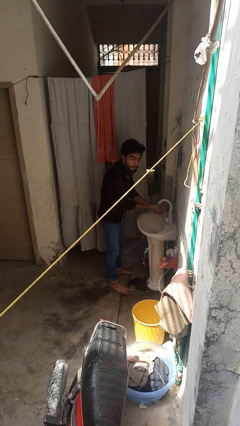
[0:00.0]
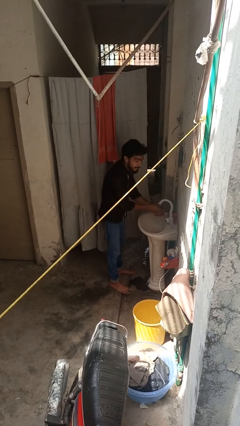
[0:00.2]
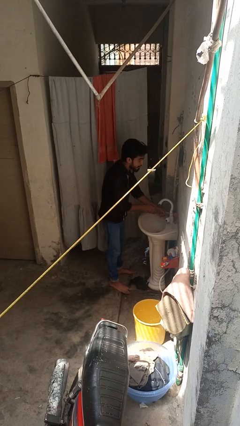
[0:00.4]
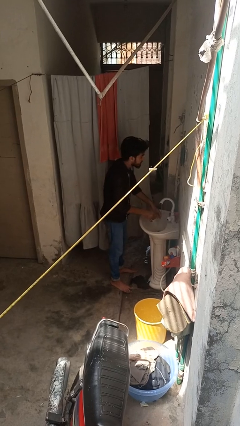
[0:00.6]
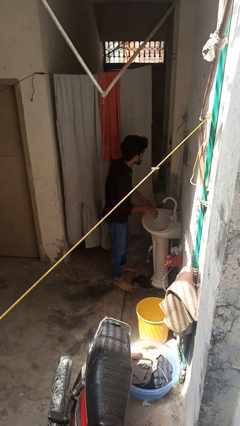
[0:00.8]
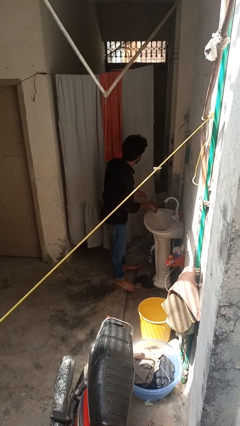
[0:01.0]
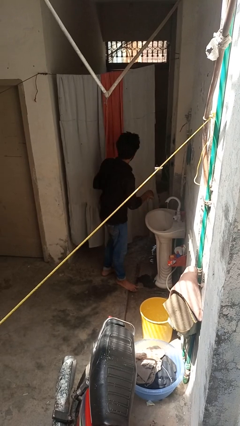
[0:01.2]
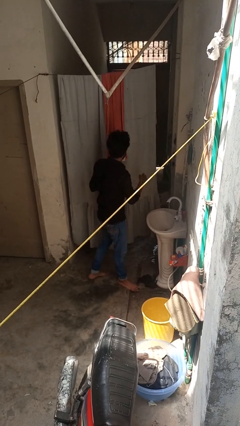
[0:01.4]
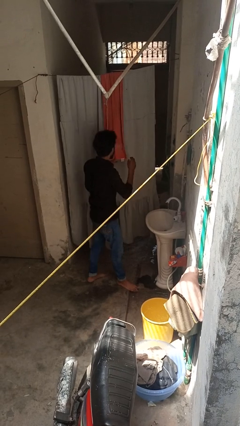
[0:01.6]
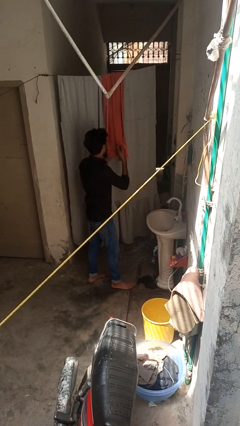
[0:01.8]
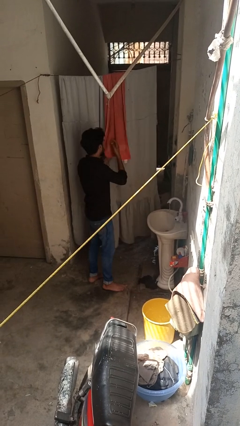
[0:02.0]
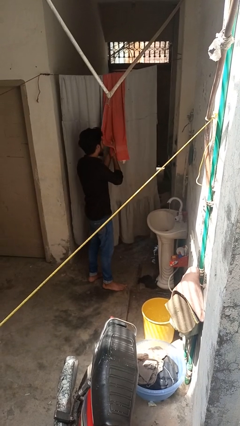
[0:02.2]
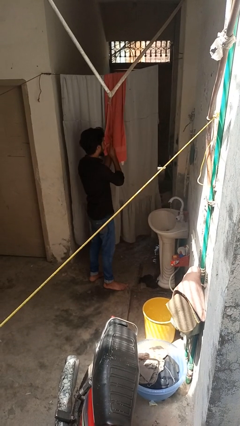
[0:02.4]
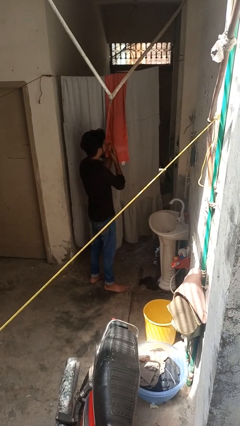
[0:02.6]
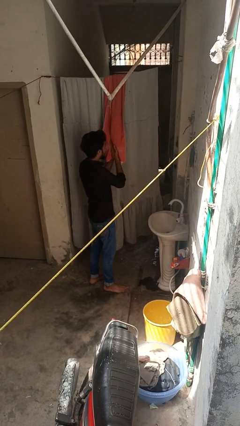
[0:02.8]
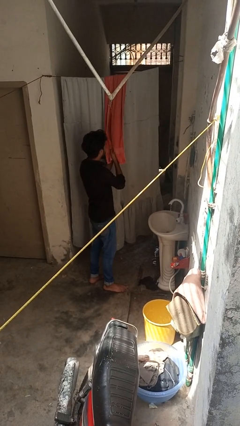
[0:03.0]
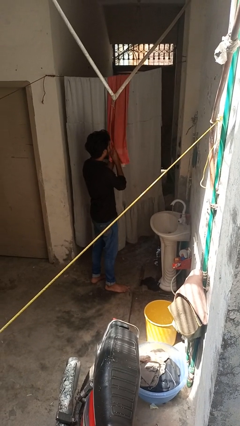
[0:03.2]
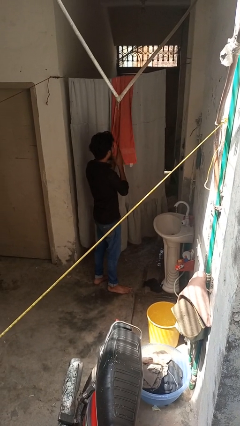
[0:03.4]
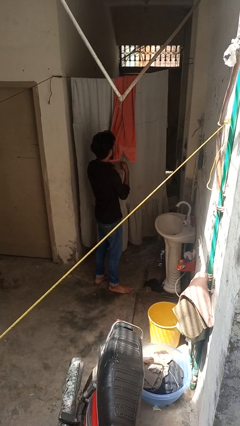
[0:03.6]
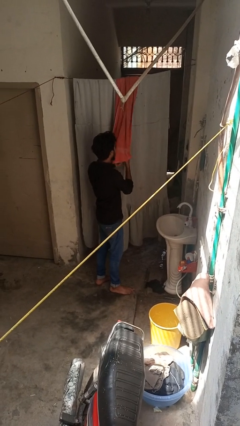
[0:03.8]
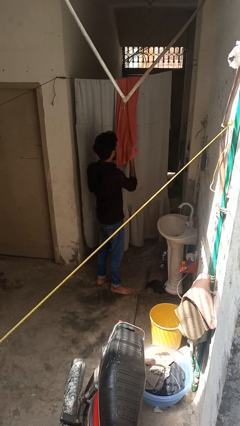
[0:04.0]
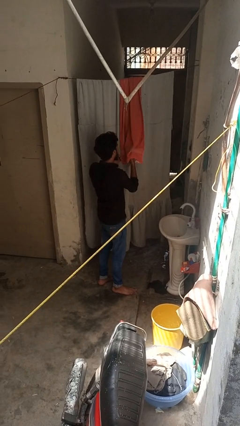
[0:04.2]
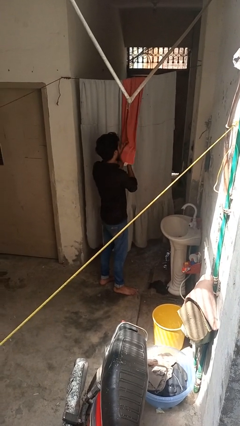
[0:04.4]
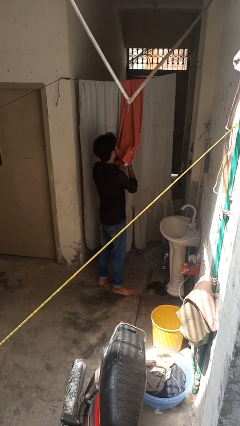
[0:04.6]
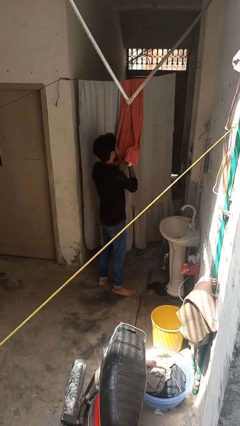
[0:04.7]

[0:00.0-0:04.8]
person dries hands with towel

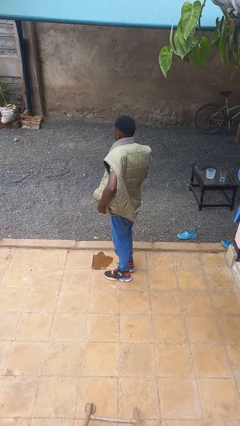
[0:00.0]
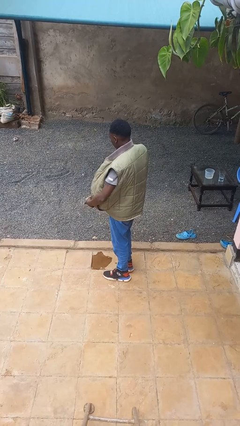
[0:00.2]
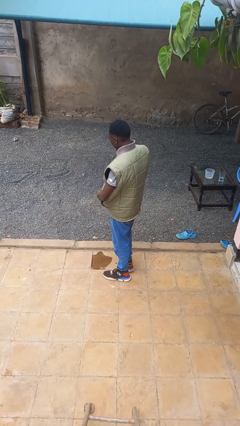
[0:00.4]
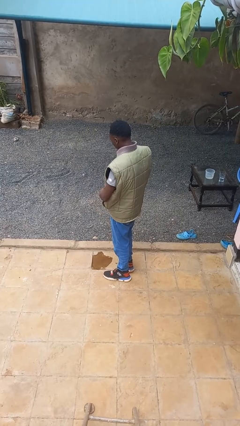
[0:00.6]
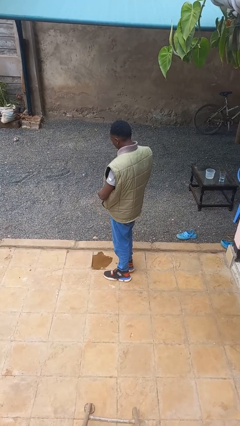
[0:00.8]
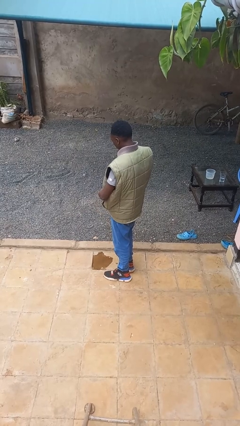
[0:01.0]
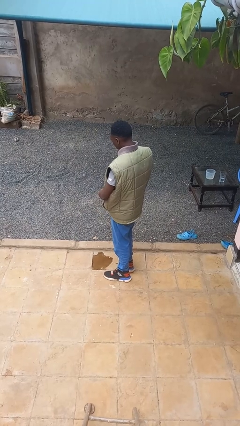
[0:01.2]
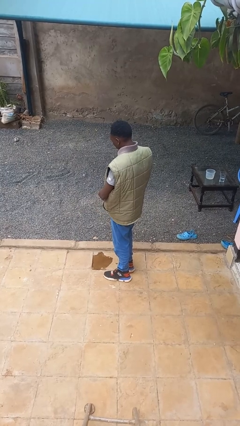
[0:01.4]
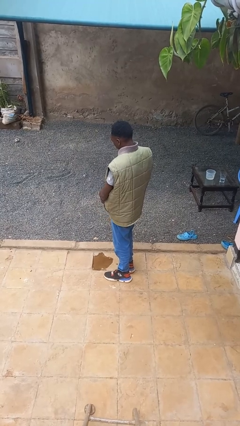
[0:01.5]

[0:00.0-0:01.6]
person zips up jacket

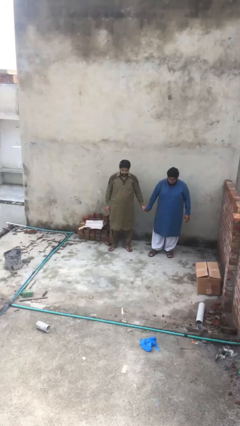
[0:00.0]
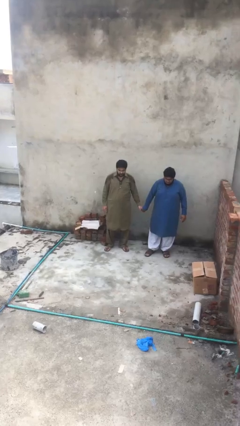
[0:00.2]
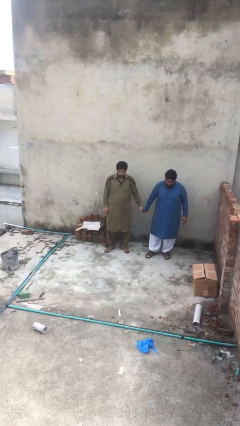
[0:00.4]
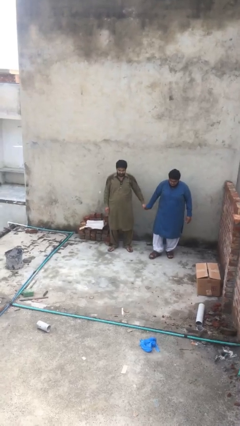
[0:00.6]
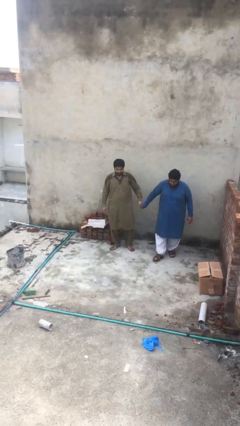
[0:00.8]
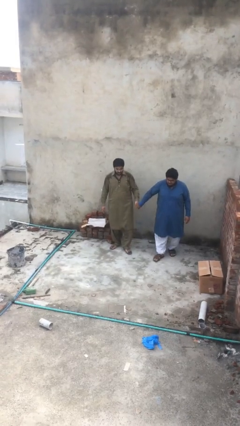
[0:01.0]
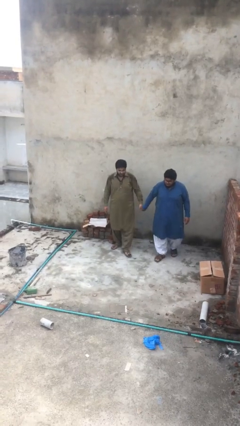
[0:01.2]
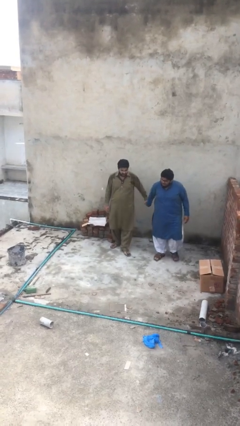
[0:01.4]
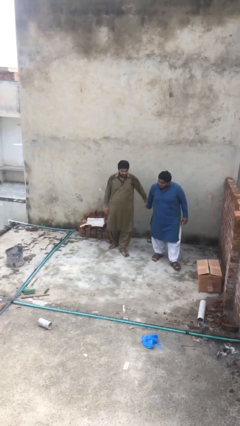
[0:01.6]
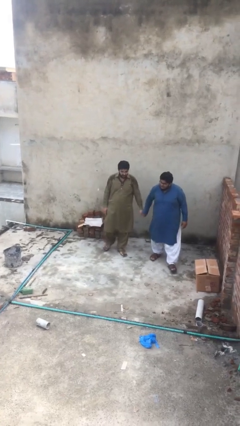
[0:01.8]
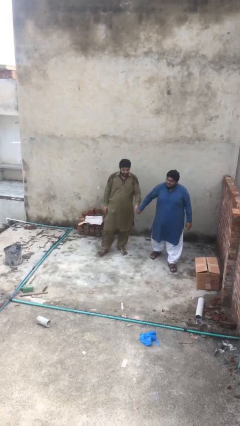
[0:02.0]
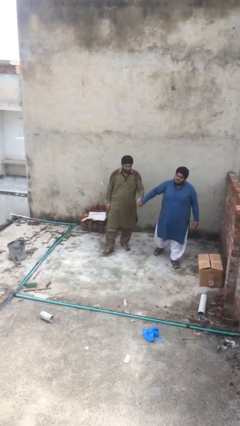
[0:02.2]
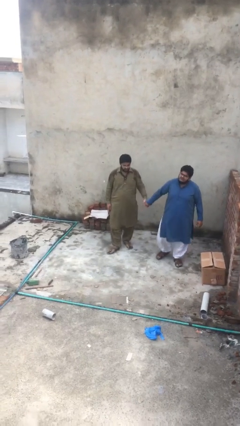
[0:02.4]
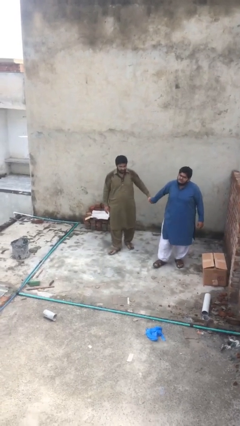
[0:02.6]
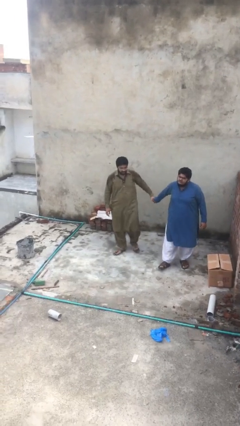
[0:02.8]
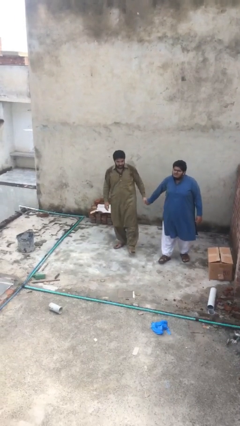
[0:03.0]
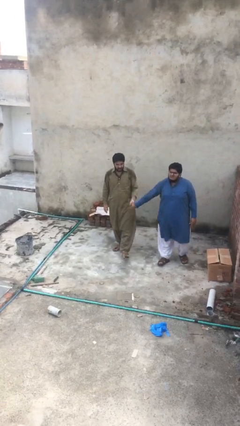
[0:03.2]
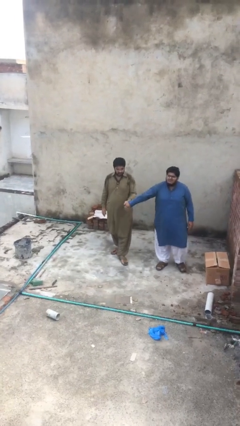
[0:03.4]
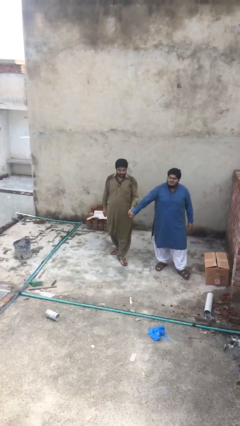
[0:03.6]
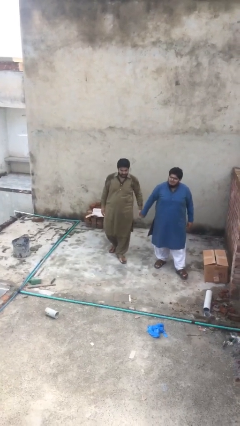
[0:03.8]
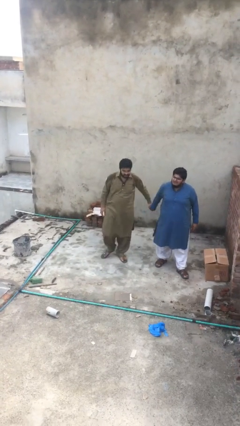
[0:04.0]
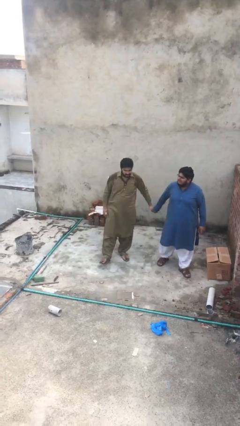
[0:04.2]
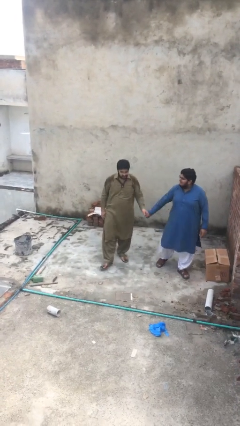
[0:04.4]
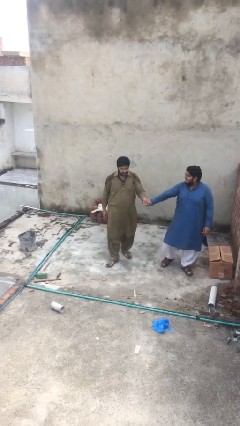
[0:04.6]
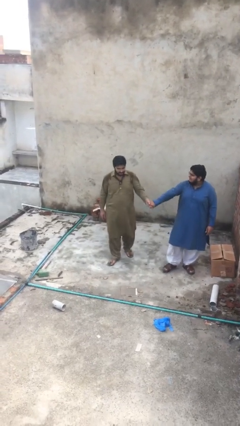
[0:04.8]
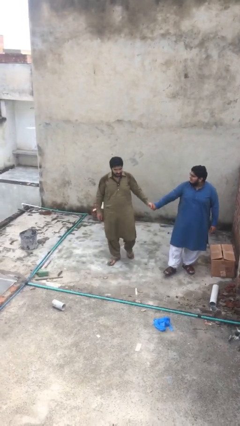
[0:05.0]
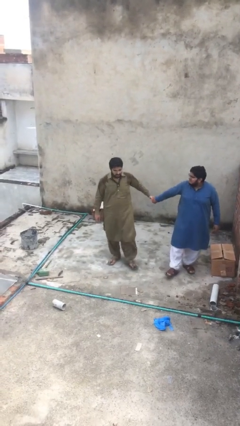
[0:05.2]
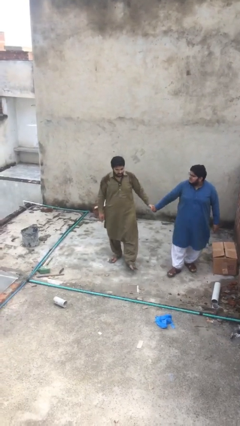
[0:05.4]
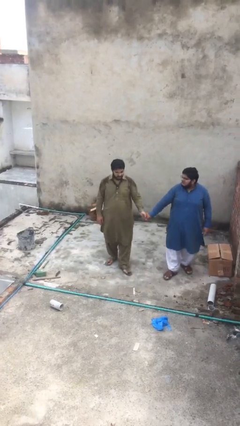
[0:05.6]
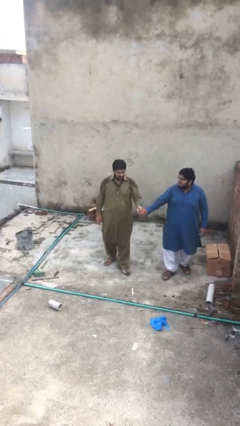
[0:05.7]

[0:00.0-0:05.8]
person holds hand

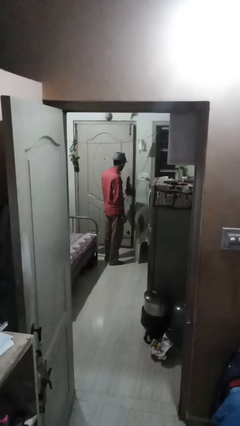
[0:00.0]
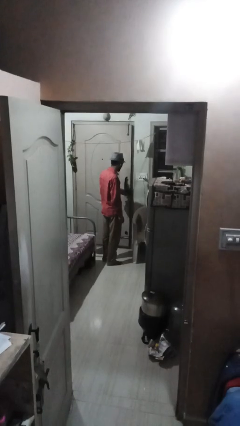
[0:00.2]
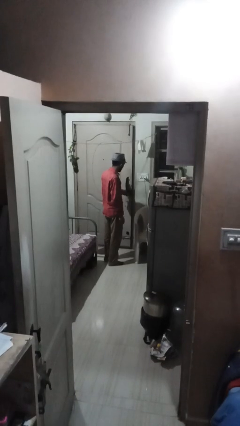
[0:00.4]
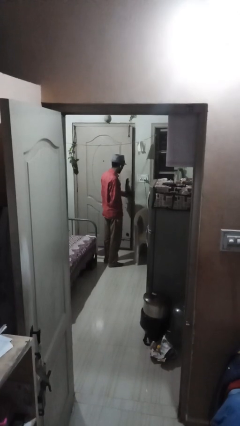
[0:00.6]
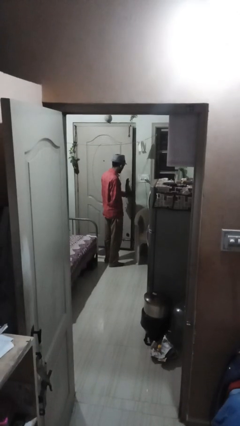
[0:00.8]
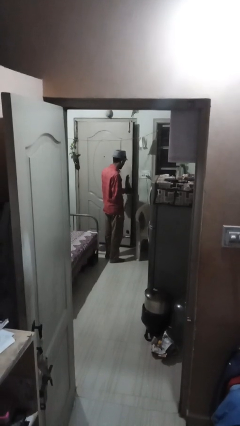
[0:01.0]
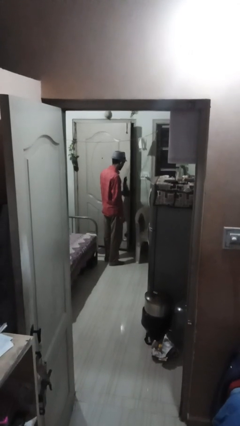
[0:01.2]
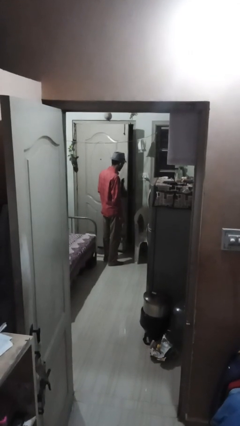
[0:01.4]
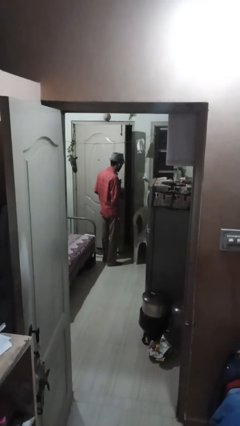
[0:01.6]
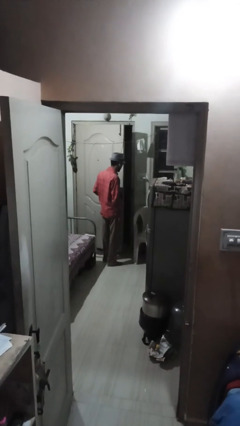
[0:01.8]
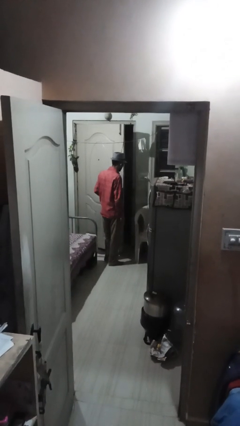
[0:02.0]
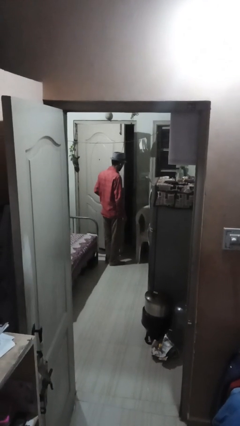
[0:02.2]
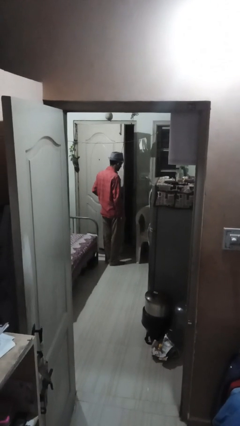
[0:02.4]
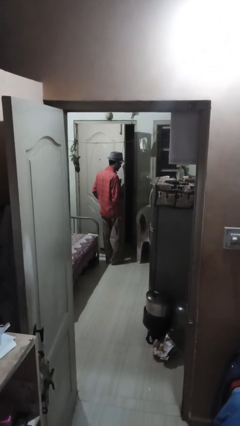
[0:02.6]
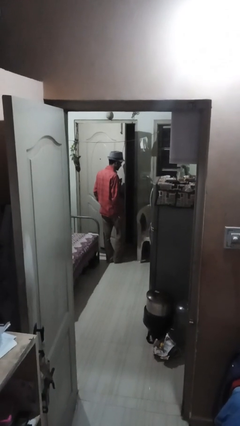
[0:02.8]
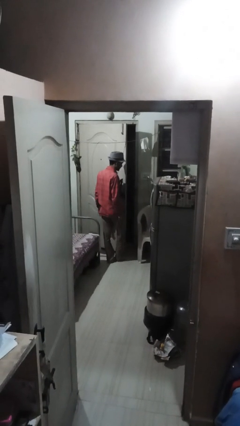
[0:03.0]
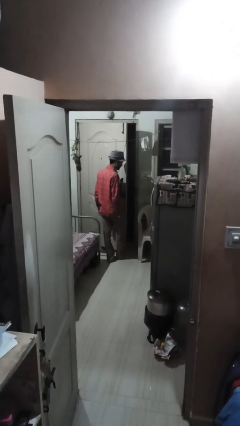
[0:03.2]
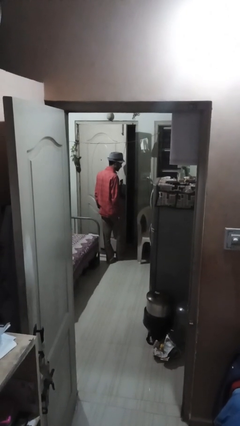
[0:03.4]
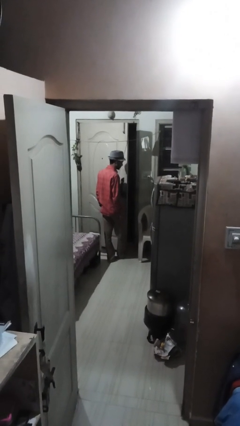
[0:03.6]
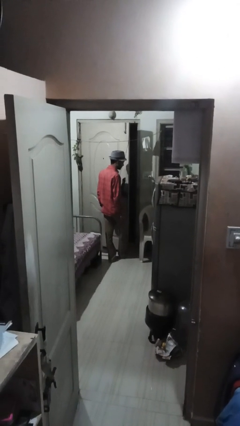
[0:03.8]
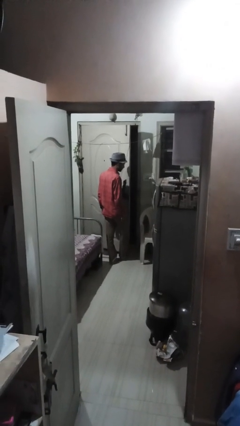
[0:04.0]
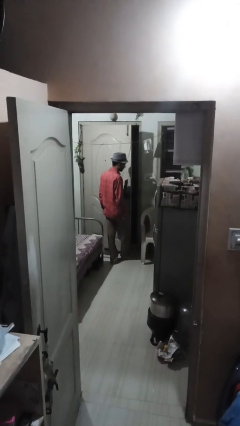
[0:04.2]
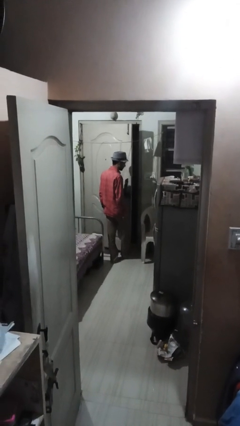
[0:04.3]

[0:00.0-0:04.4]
person opens facility door

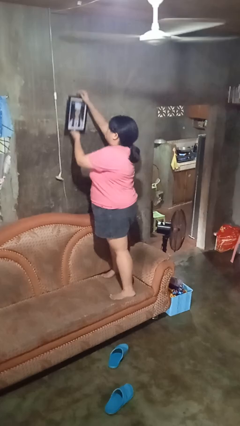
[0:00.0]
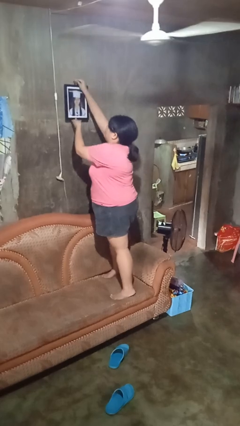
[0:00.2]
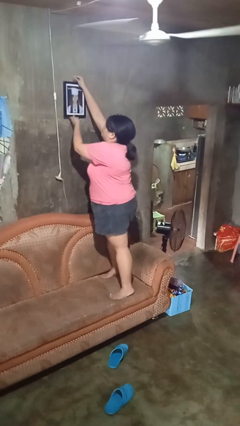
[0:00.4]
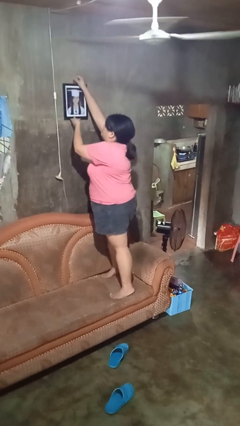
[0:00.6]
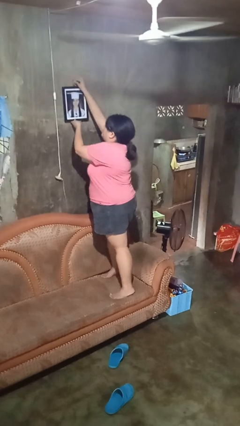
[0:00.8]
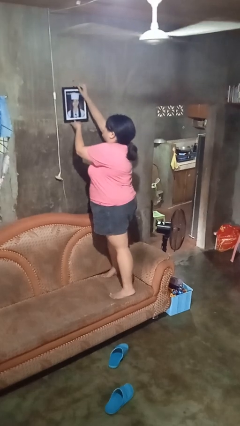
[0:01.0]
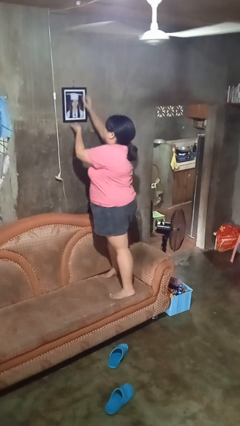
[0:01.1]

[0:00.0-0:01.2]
person puts up picture frame
